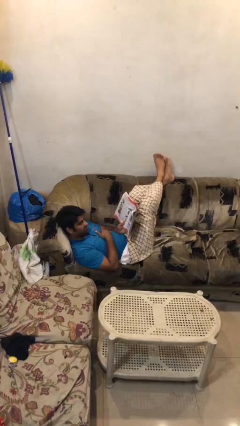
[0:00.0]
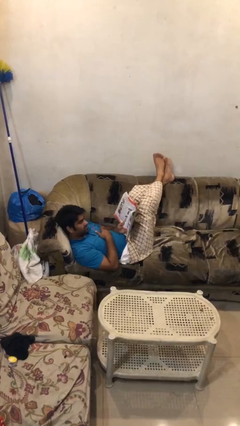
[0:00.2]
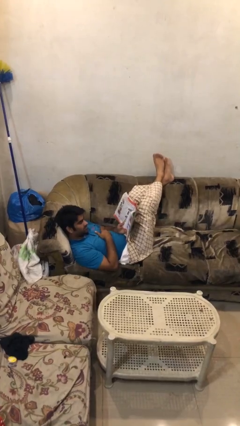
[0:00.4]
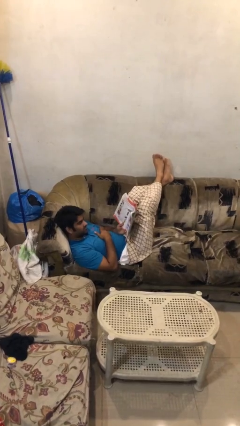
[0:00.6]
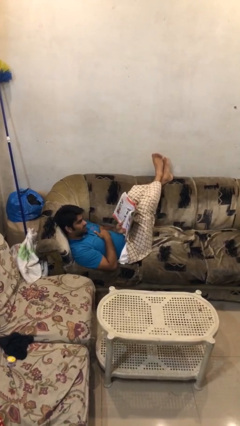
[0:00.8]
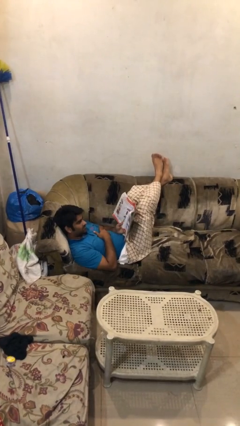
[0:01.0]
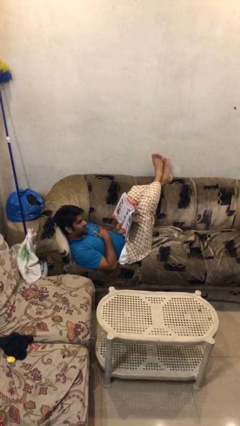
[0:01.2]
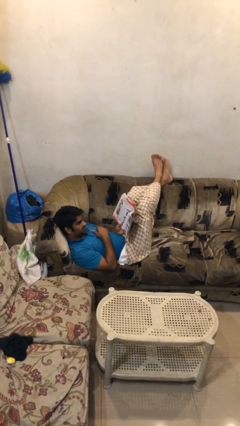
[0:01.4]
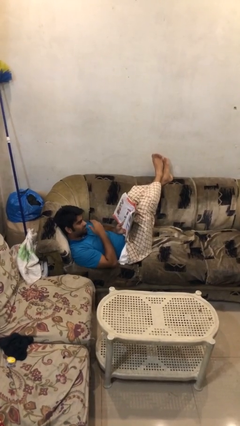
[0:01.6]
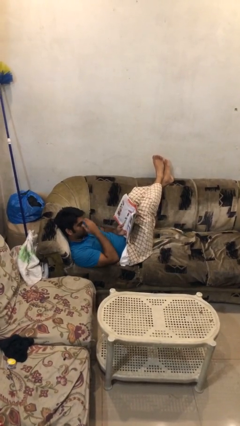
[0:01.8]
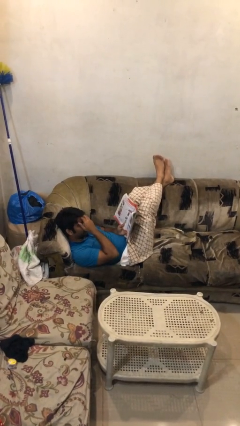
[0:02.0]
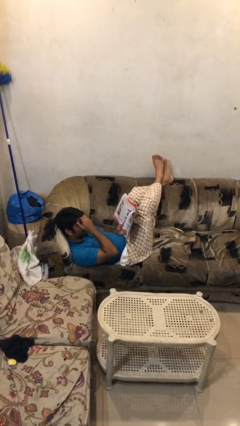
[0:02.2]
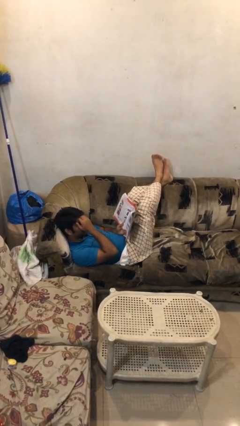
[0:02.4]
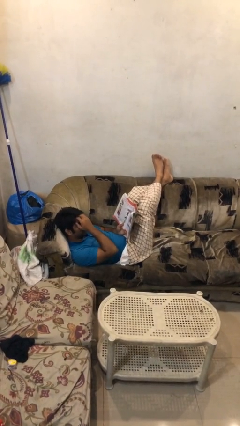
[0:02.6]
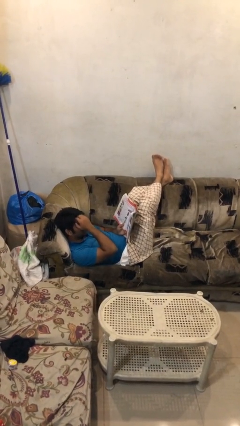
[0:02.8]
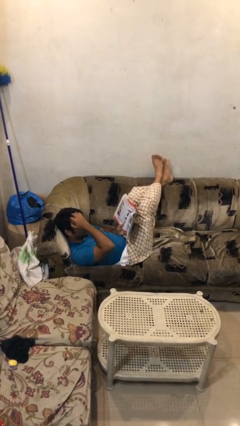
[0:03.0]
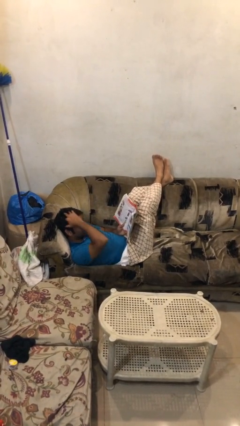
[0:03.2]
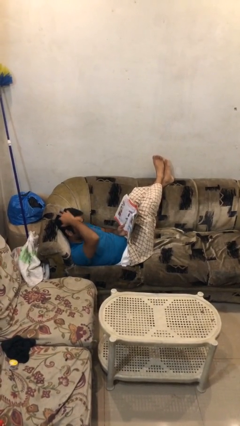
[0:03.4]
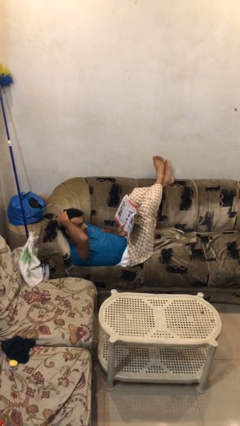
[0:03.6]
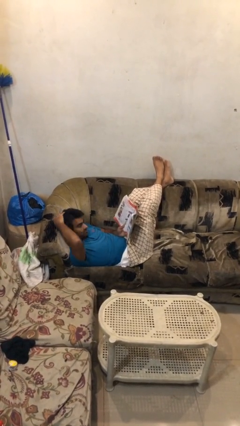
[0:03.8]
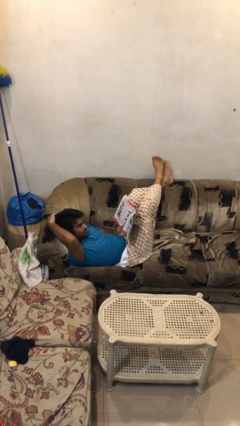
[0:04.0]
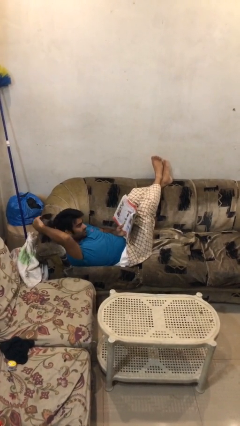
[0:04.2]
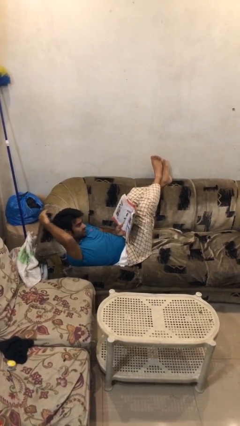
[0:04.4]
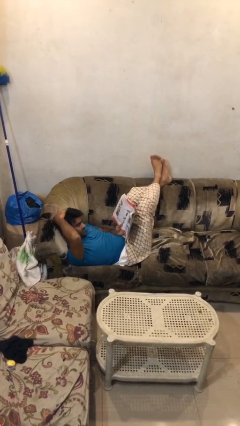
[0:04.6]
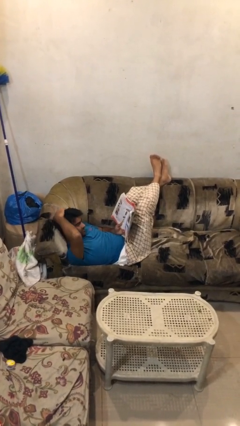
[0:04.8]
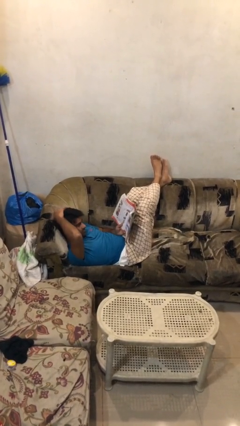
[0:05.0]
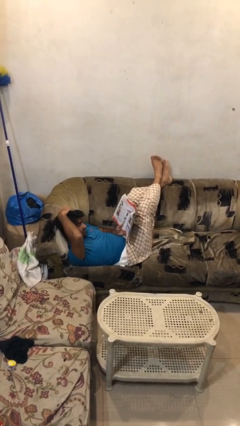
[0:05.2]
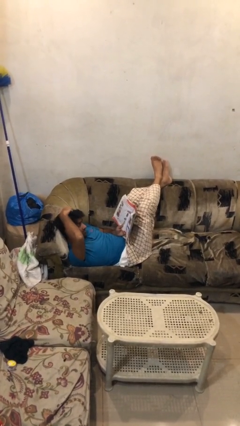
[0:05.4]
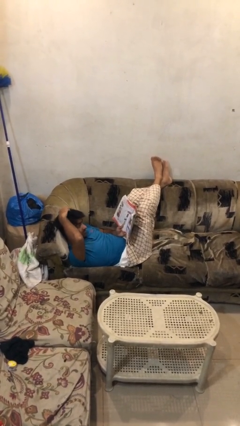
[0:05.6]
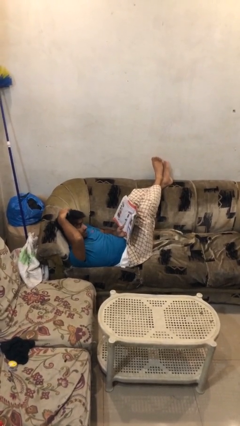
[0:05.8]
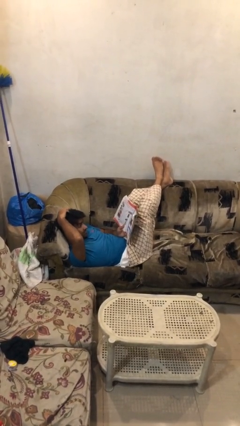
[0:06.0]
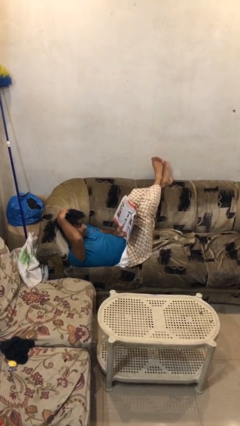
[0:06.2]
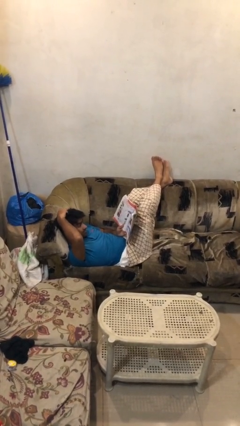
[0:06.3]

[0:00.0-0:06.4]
person reads document

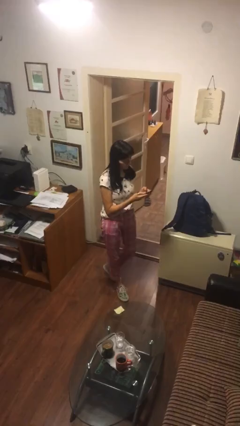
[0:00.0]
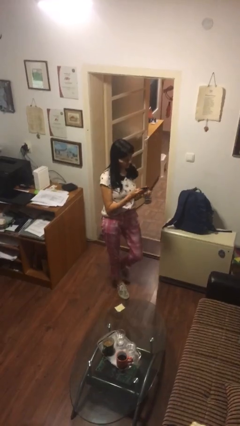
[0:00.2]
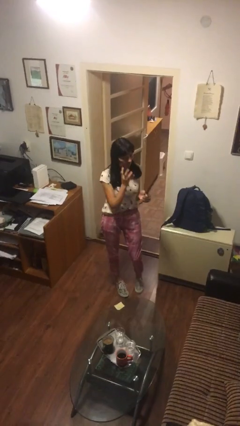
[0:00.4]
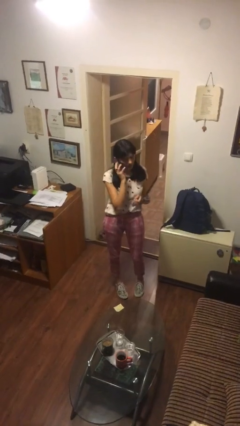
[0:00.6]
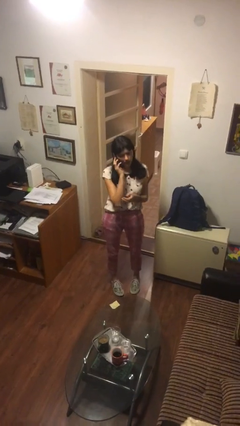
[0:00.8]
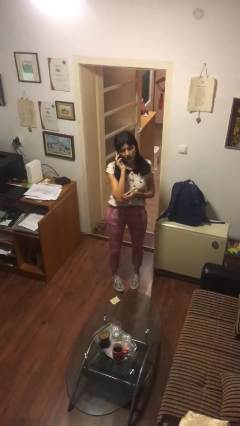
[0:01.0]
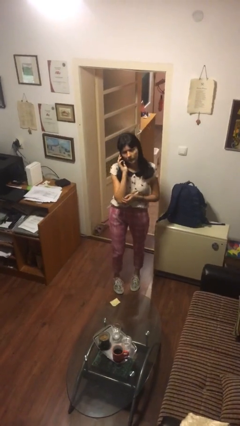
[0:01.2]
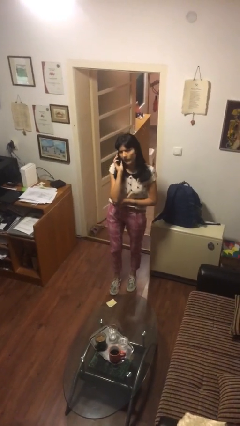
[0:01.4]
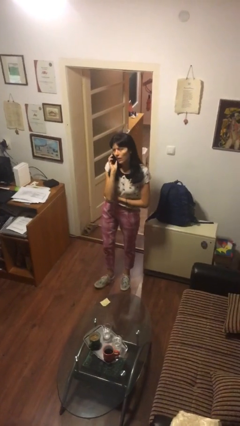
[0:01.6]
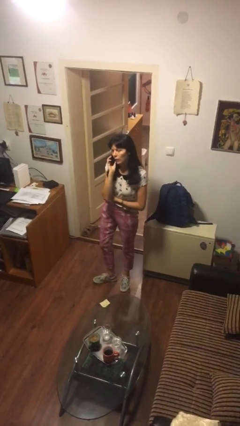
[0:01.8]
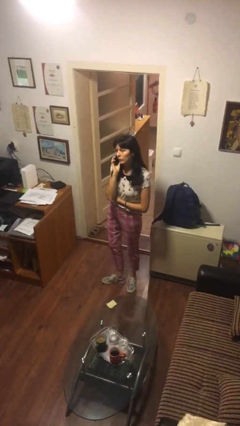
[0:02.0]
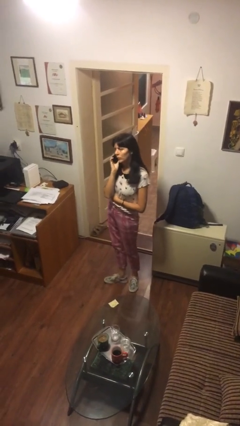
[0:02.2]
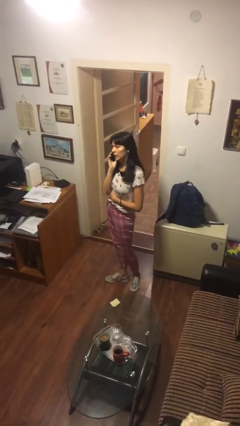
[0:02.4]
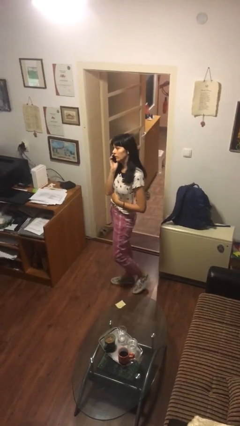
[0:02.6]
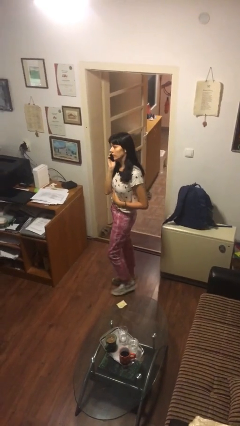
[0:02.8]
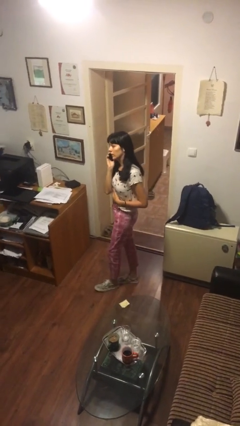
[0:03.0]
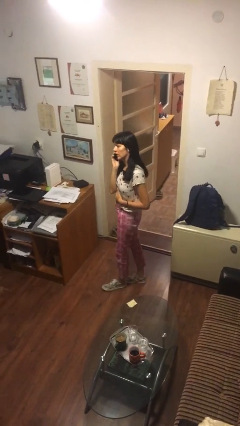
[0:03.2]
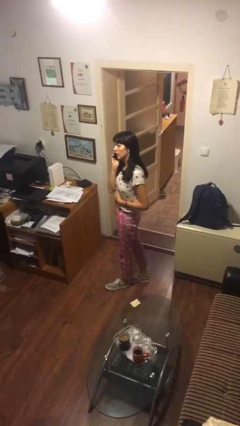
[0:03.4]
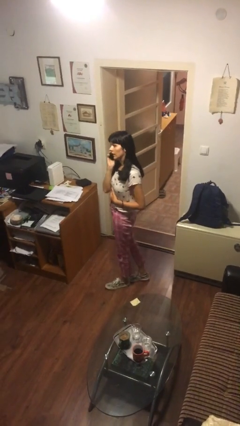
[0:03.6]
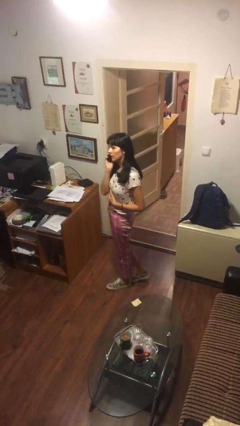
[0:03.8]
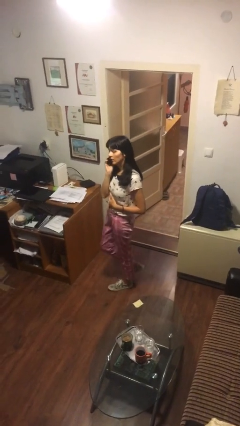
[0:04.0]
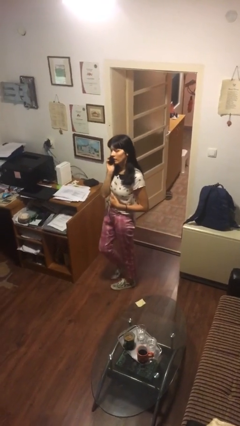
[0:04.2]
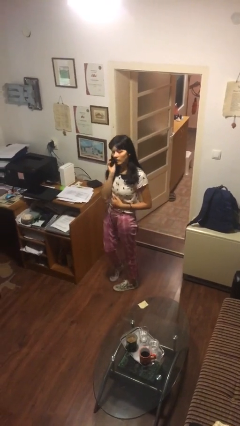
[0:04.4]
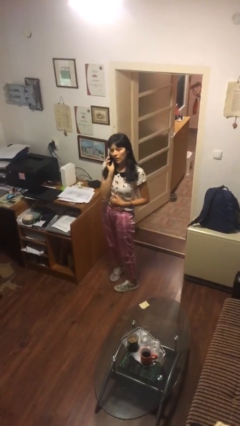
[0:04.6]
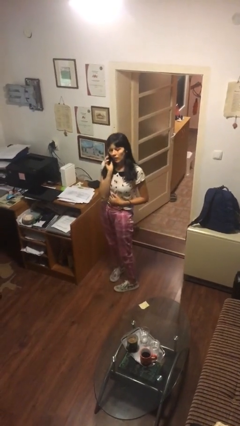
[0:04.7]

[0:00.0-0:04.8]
person talks on phone

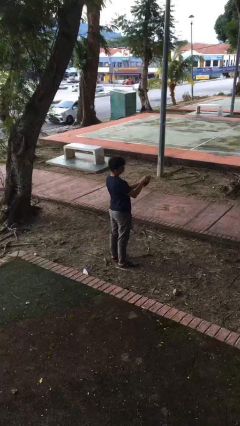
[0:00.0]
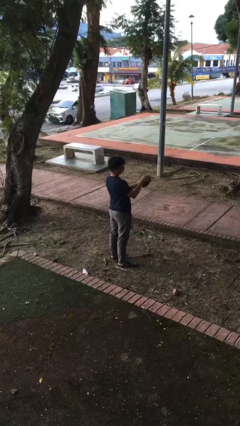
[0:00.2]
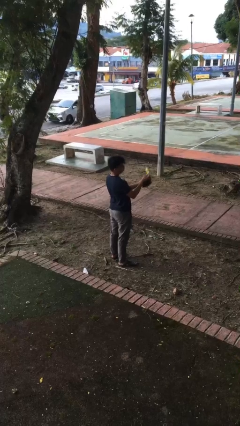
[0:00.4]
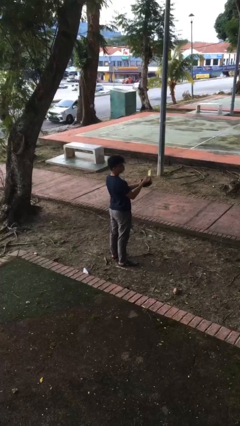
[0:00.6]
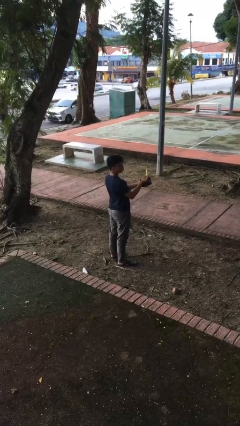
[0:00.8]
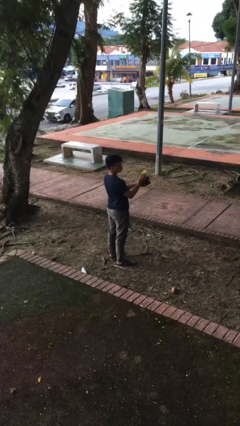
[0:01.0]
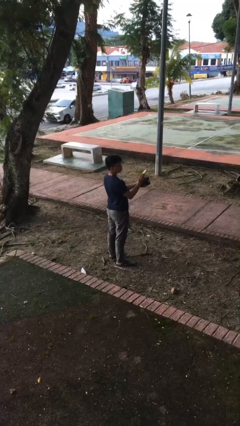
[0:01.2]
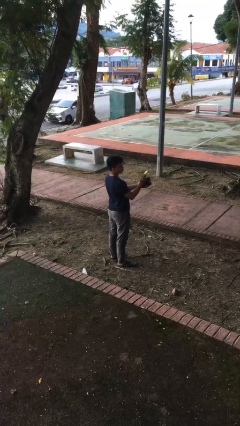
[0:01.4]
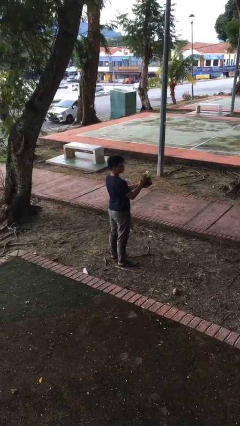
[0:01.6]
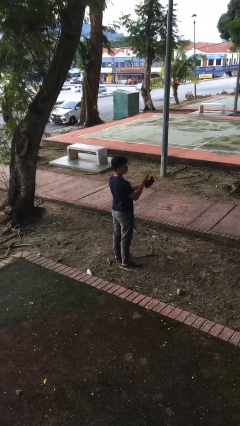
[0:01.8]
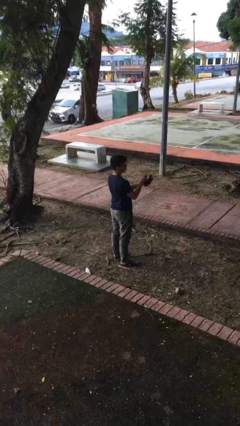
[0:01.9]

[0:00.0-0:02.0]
person takes object from purse

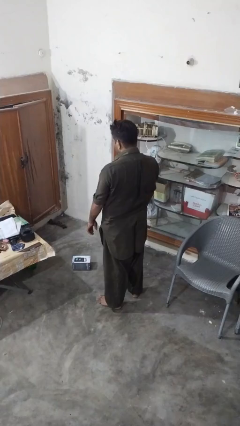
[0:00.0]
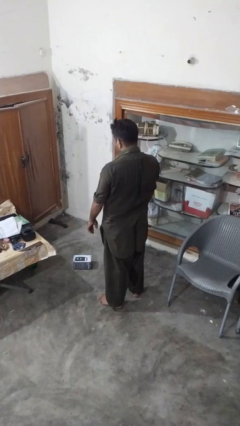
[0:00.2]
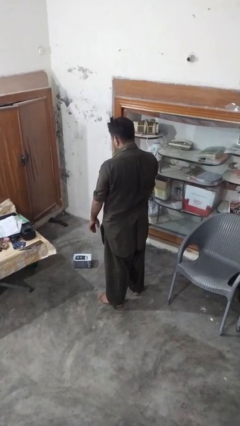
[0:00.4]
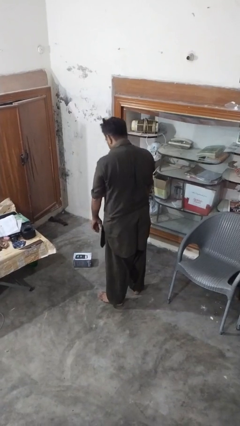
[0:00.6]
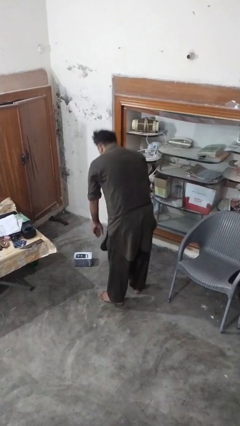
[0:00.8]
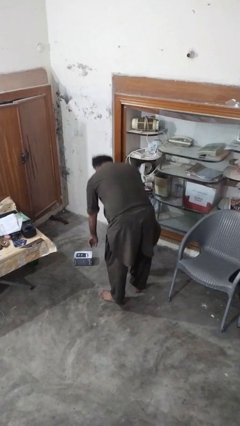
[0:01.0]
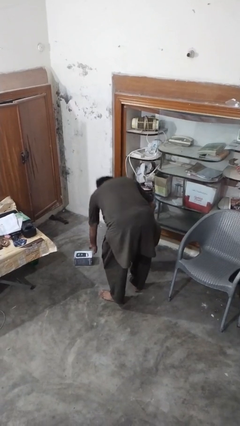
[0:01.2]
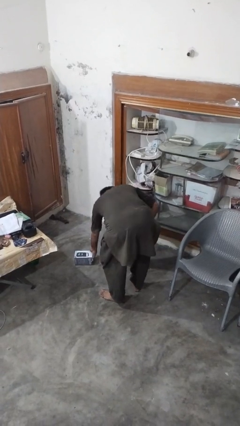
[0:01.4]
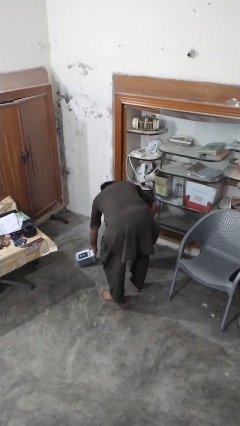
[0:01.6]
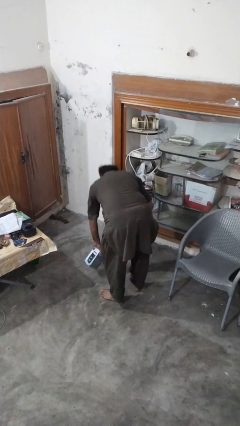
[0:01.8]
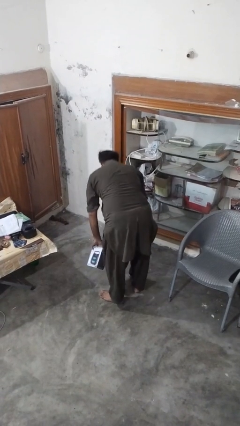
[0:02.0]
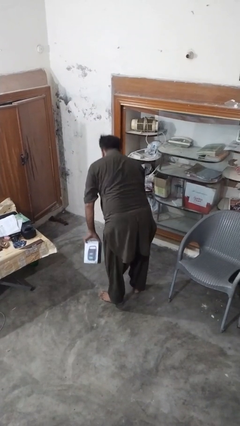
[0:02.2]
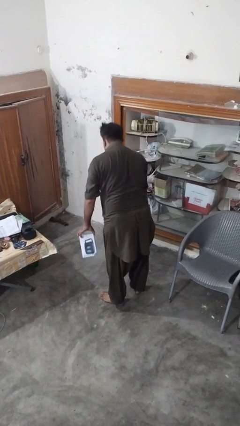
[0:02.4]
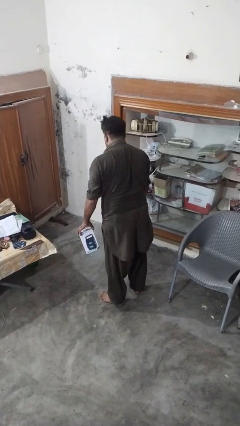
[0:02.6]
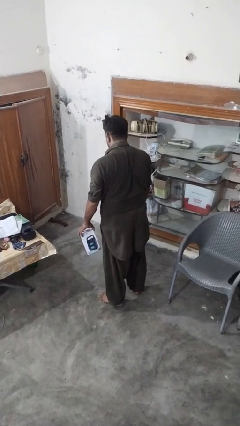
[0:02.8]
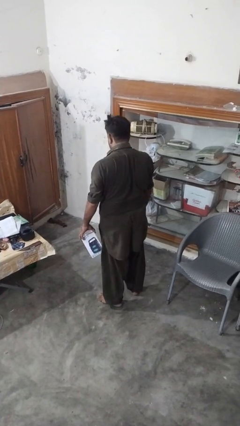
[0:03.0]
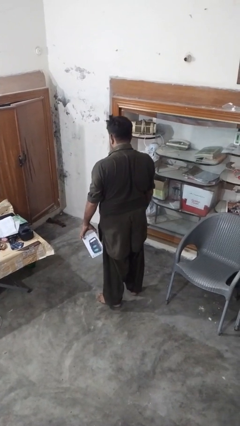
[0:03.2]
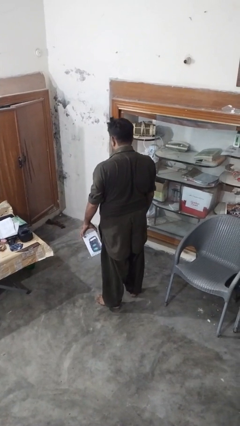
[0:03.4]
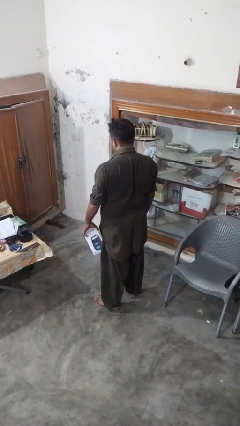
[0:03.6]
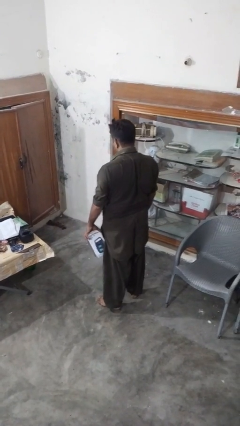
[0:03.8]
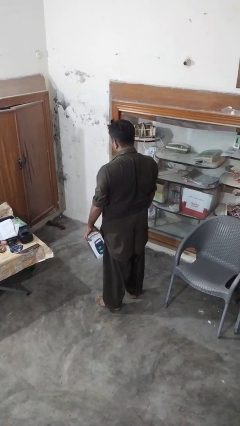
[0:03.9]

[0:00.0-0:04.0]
person picks up object from floor

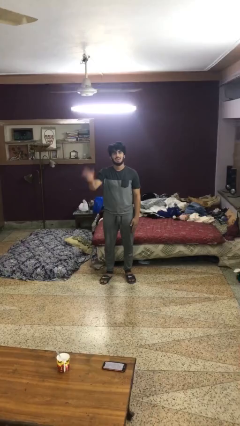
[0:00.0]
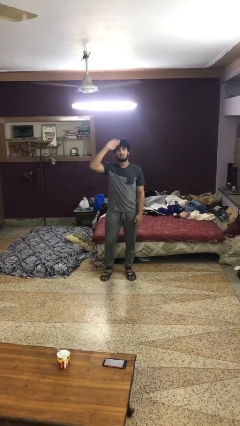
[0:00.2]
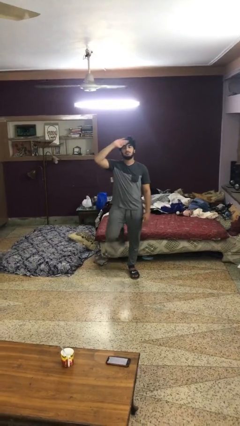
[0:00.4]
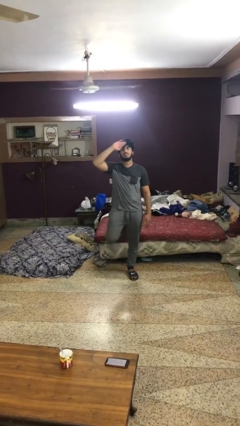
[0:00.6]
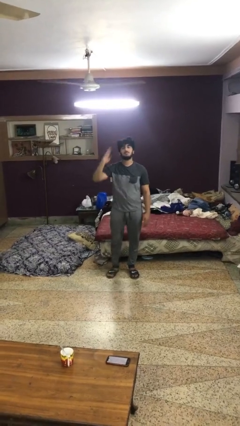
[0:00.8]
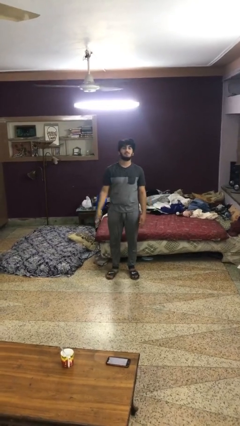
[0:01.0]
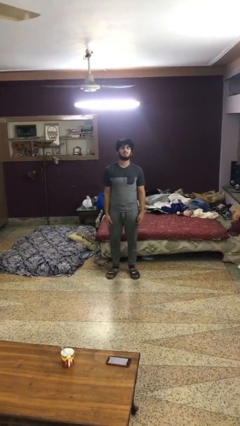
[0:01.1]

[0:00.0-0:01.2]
person salutes
